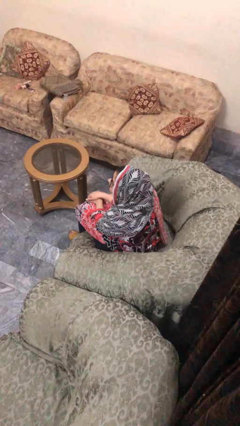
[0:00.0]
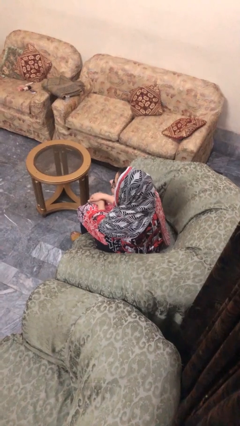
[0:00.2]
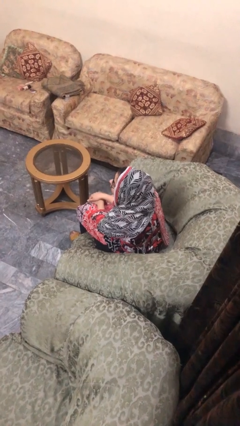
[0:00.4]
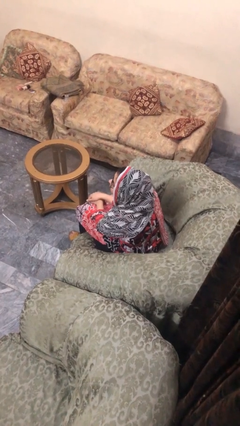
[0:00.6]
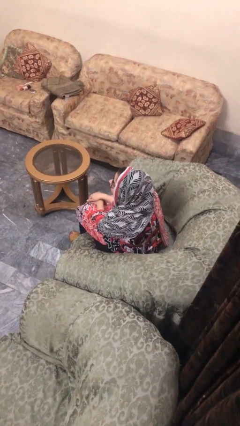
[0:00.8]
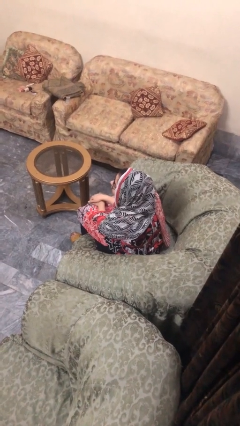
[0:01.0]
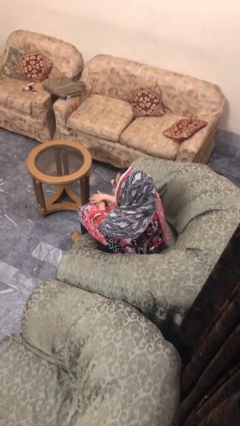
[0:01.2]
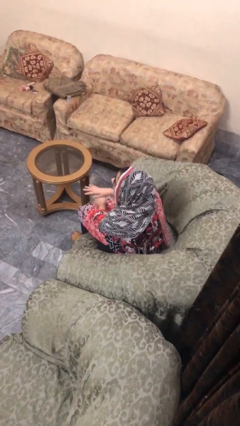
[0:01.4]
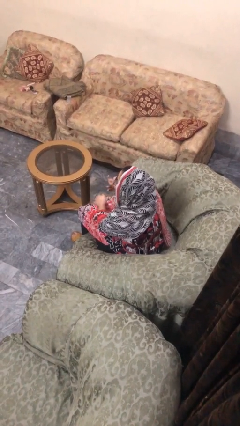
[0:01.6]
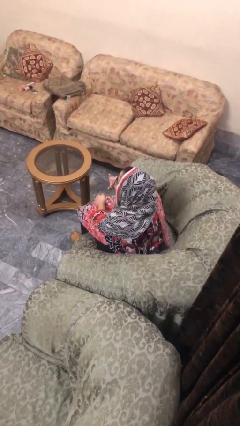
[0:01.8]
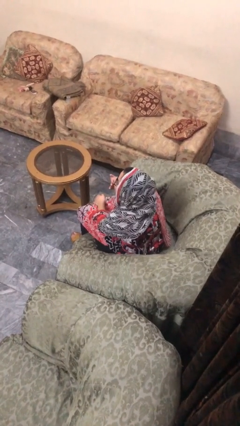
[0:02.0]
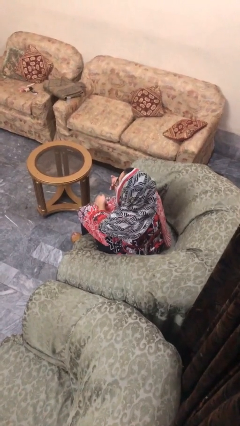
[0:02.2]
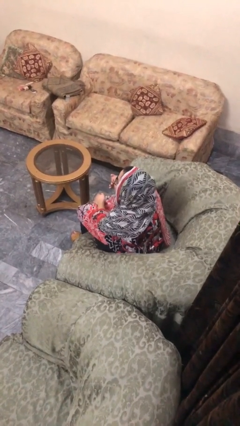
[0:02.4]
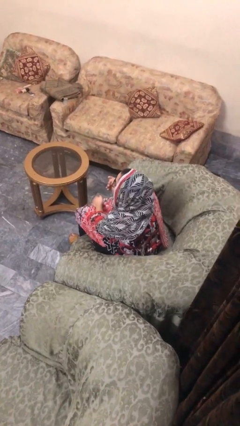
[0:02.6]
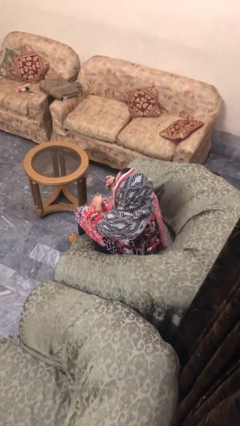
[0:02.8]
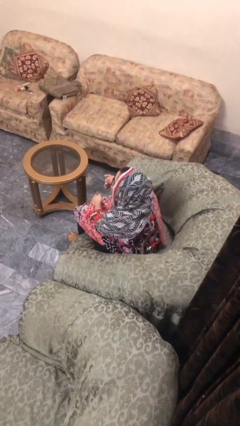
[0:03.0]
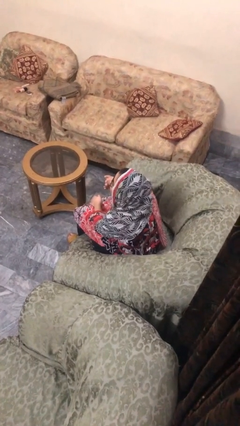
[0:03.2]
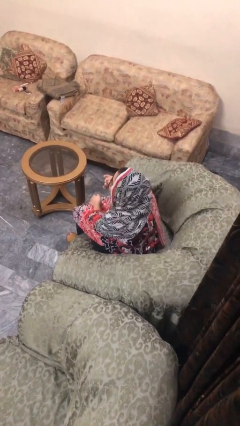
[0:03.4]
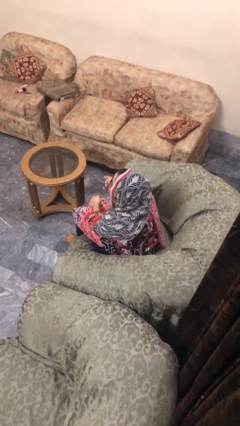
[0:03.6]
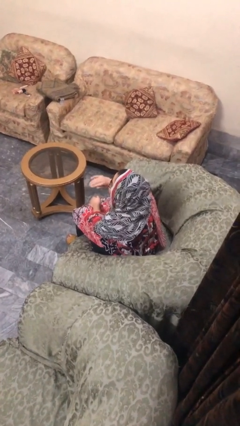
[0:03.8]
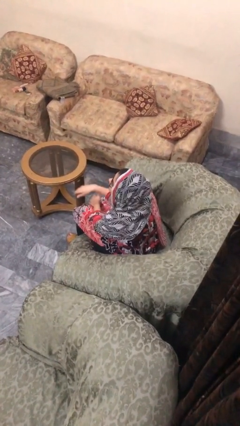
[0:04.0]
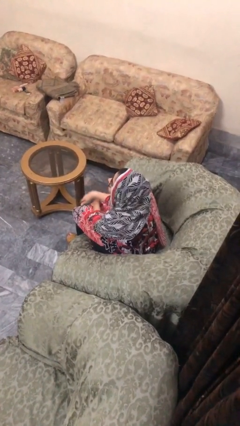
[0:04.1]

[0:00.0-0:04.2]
person yawns

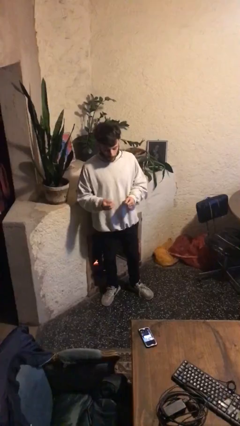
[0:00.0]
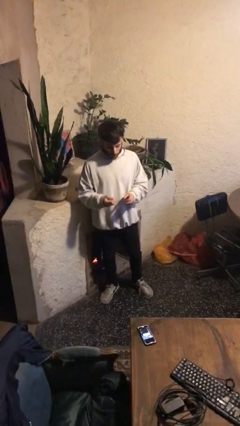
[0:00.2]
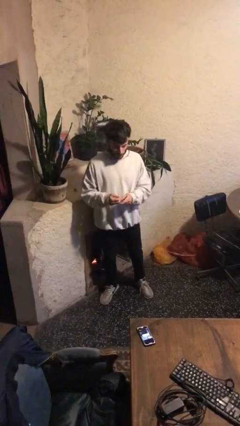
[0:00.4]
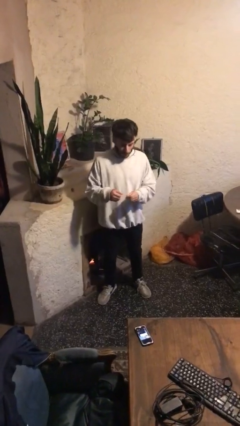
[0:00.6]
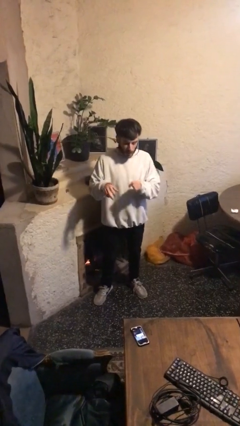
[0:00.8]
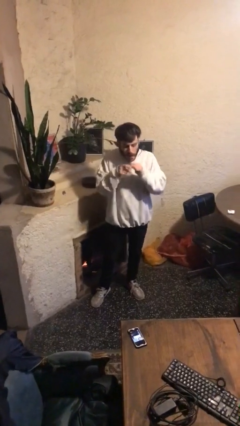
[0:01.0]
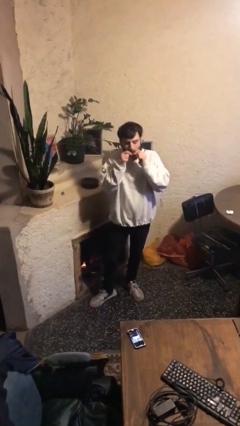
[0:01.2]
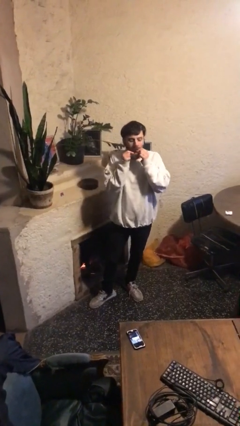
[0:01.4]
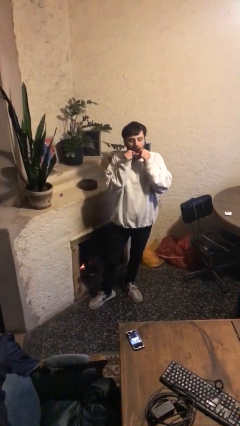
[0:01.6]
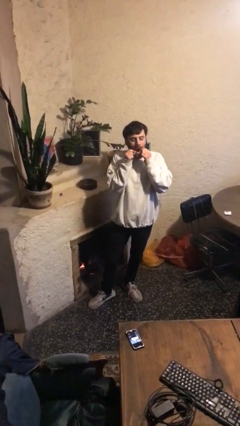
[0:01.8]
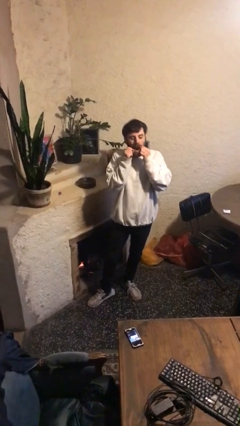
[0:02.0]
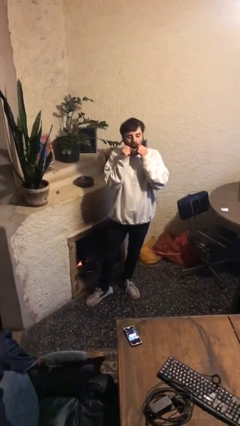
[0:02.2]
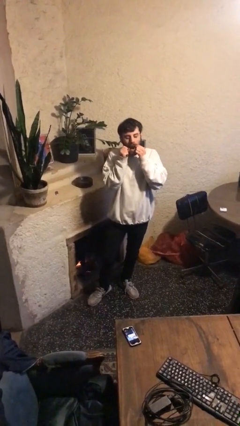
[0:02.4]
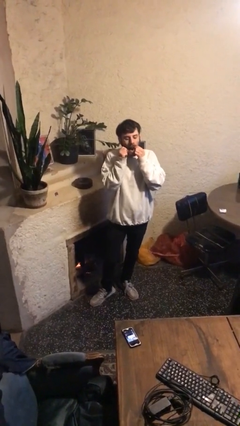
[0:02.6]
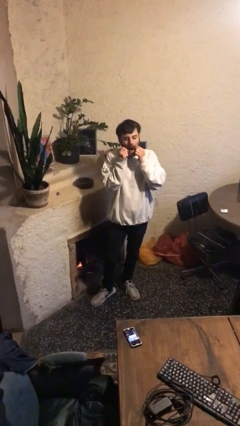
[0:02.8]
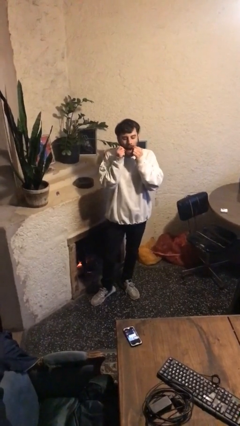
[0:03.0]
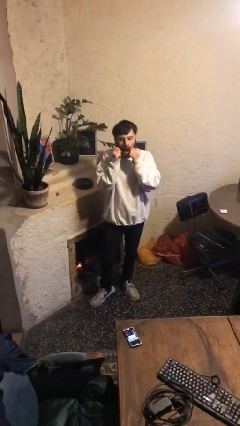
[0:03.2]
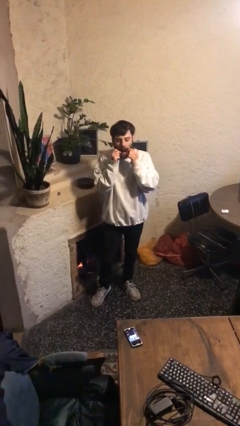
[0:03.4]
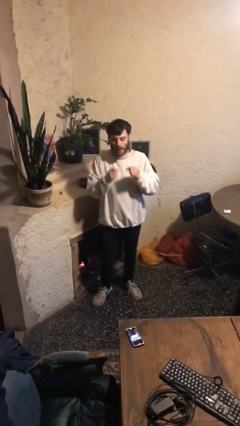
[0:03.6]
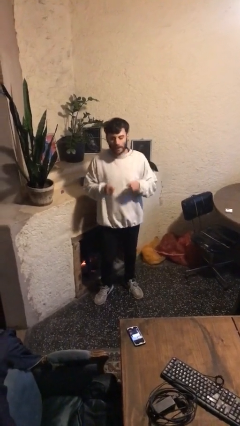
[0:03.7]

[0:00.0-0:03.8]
person flosses

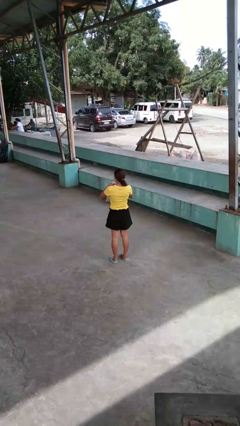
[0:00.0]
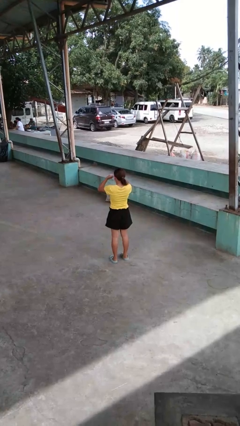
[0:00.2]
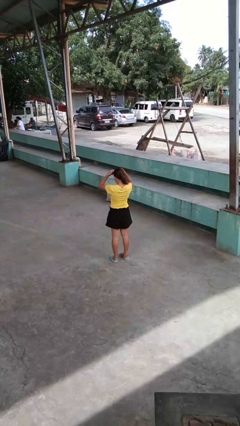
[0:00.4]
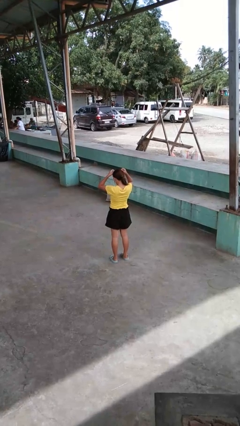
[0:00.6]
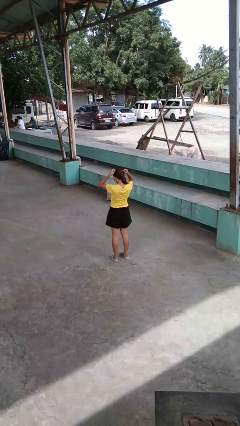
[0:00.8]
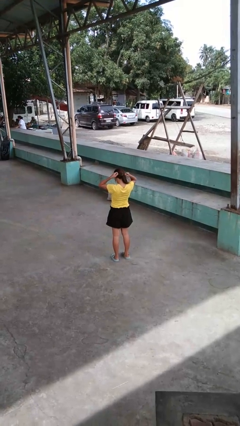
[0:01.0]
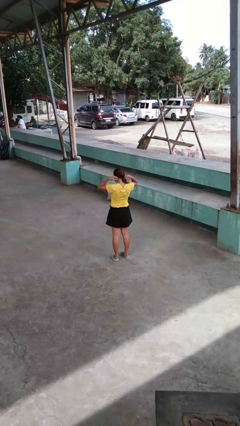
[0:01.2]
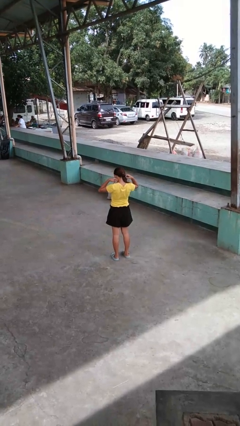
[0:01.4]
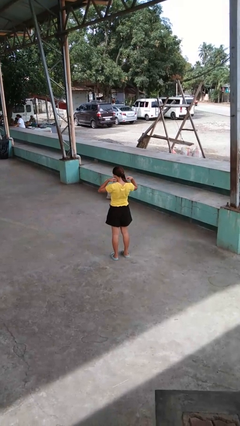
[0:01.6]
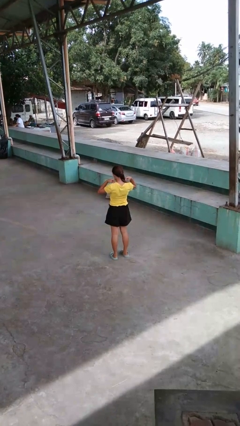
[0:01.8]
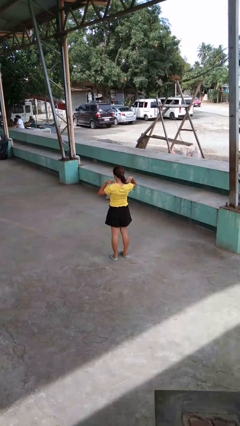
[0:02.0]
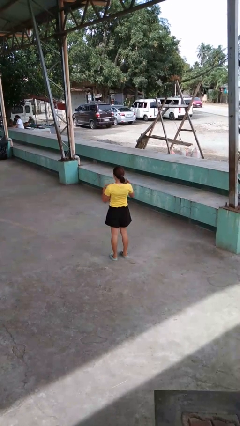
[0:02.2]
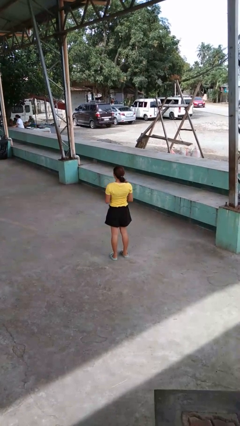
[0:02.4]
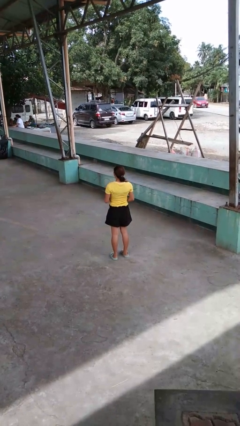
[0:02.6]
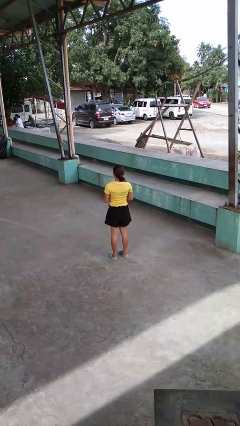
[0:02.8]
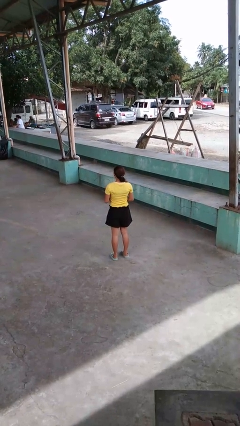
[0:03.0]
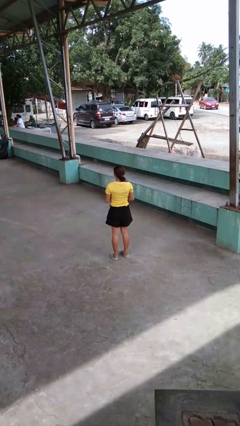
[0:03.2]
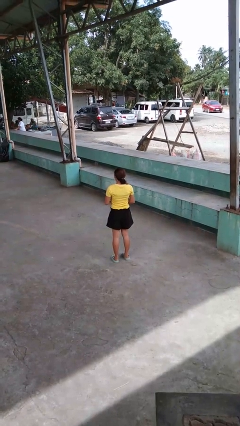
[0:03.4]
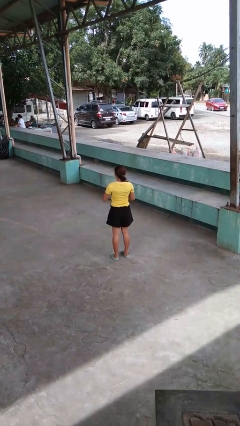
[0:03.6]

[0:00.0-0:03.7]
person puts on necklace

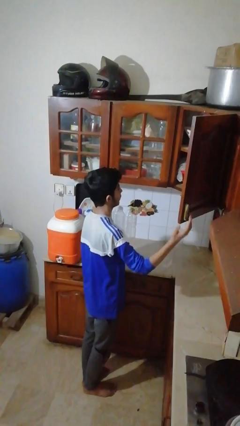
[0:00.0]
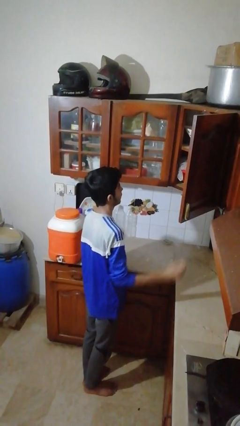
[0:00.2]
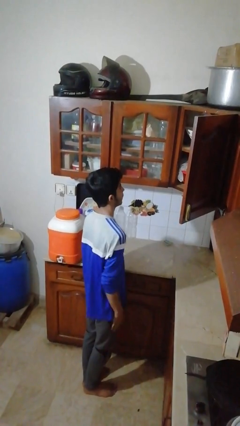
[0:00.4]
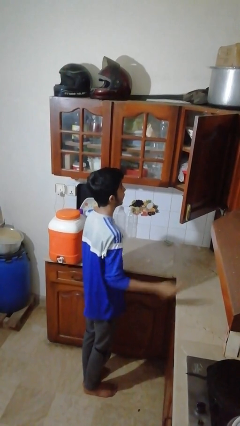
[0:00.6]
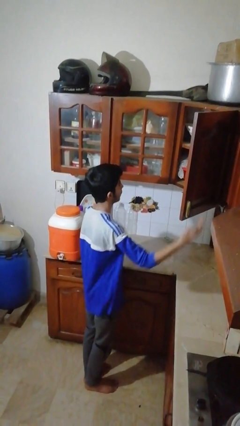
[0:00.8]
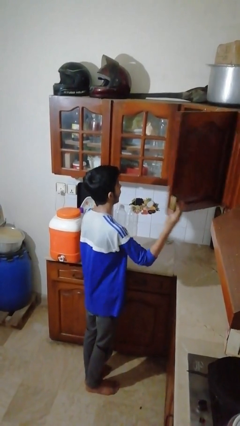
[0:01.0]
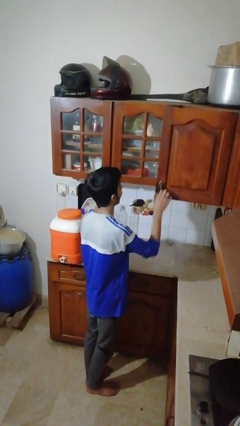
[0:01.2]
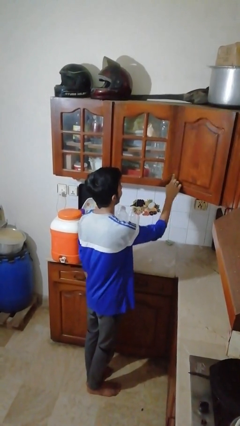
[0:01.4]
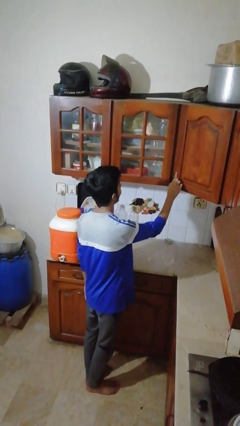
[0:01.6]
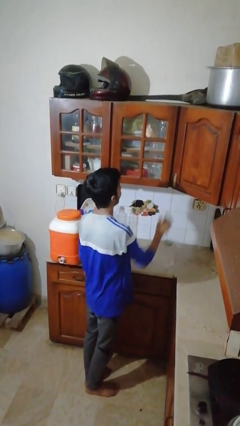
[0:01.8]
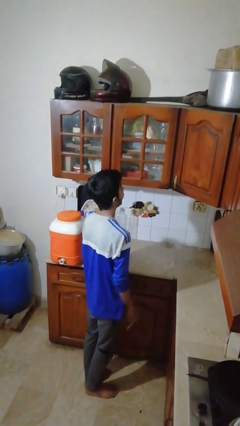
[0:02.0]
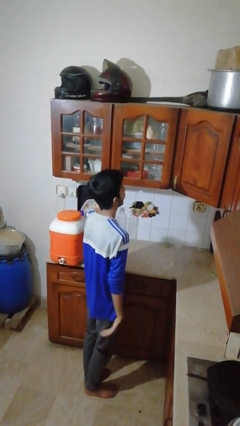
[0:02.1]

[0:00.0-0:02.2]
person closes cabinet

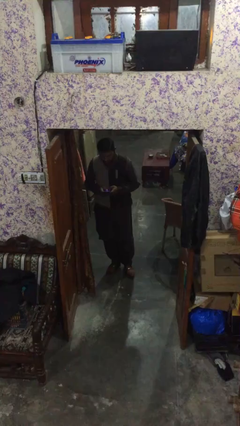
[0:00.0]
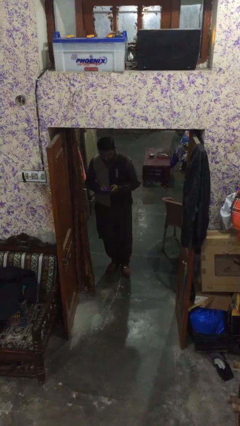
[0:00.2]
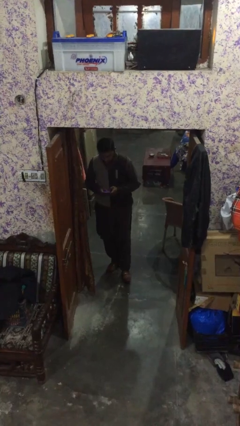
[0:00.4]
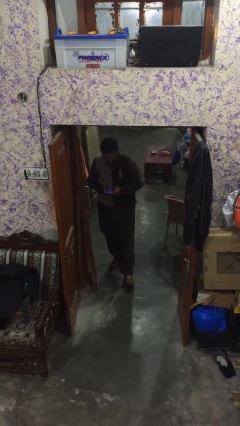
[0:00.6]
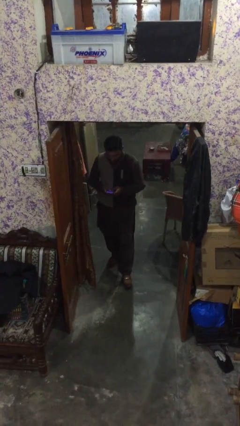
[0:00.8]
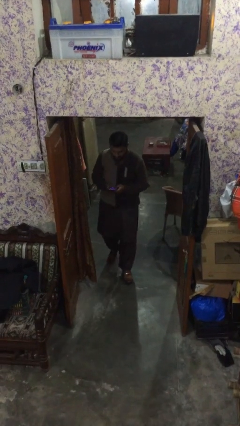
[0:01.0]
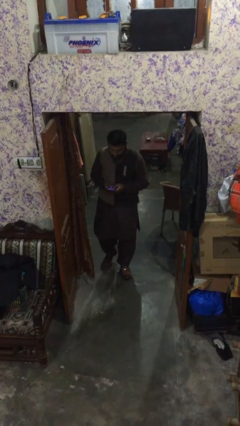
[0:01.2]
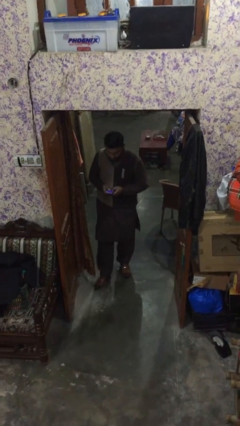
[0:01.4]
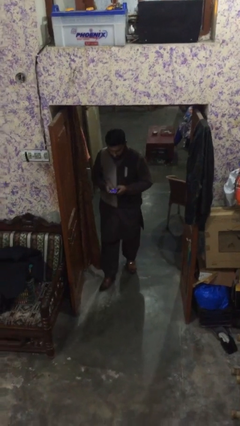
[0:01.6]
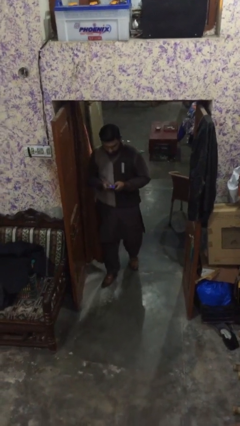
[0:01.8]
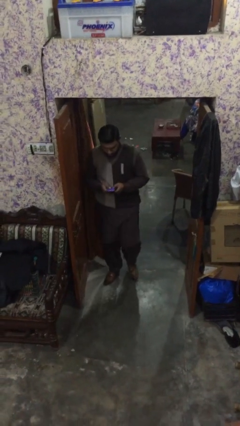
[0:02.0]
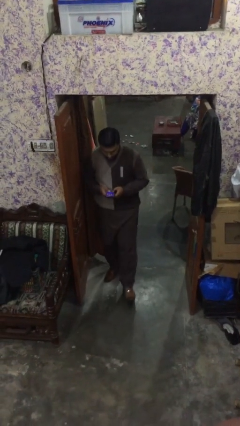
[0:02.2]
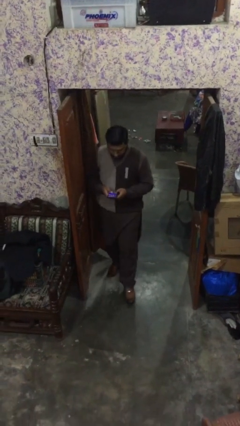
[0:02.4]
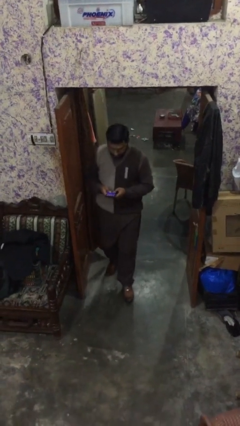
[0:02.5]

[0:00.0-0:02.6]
person enters scene through structure

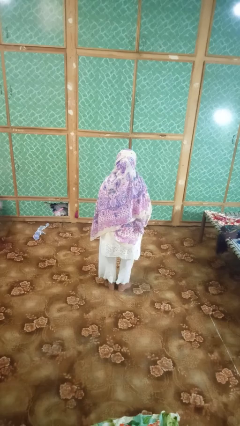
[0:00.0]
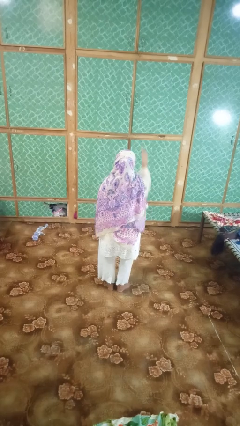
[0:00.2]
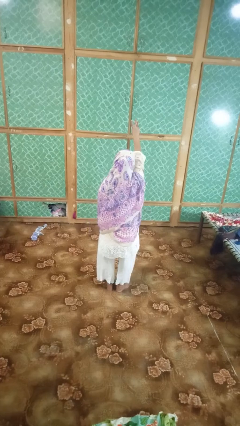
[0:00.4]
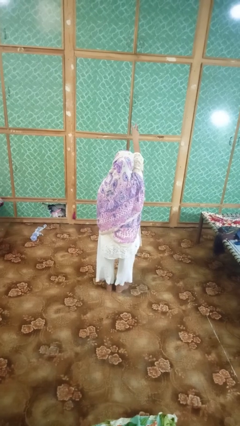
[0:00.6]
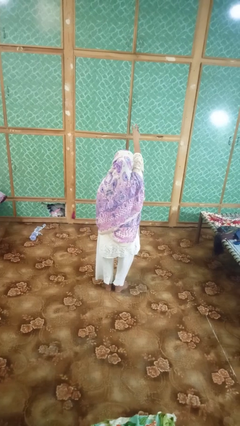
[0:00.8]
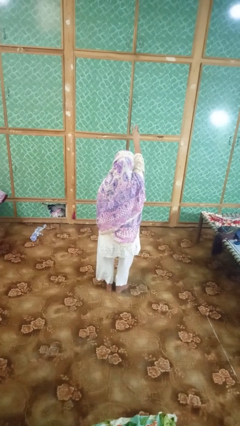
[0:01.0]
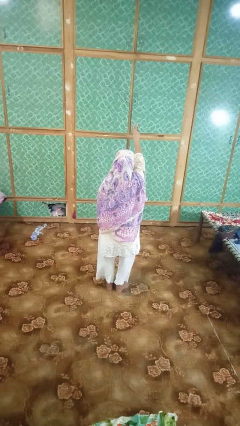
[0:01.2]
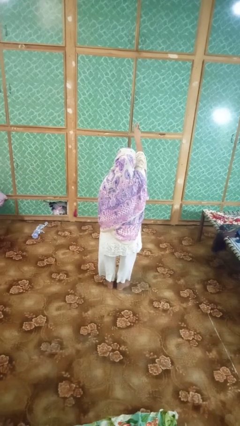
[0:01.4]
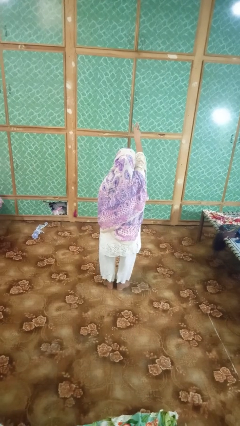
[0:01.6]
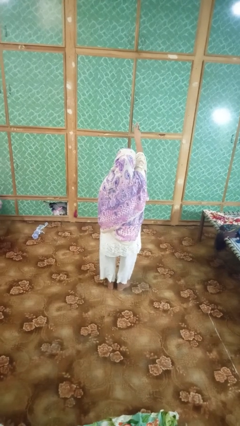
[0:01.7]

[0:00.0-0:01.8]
person gestures number three
